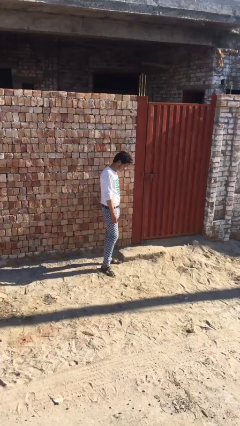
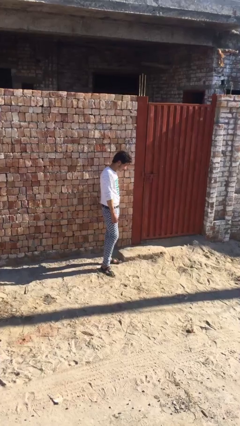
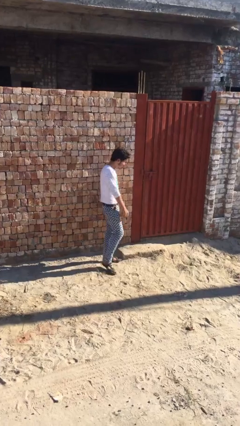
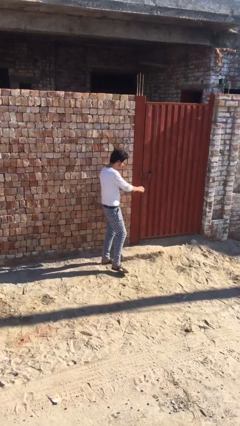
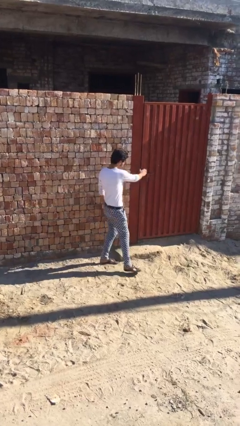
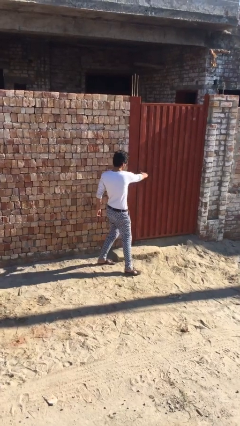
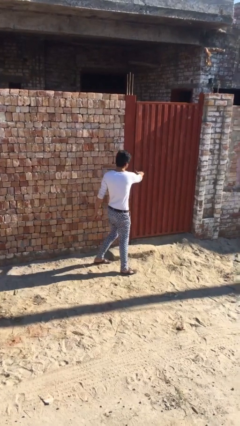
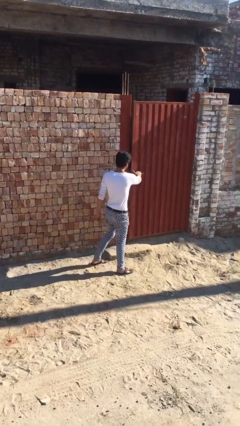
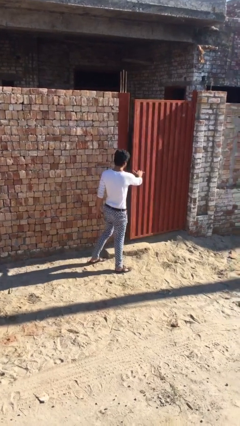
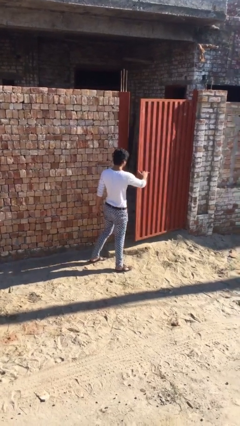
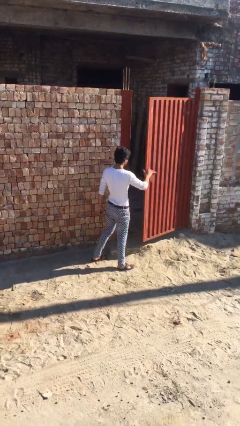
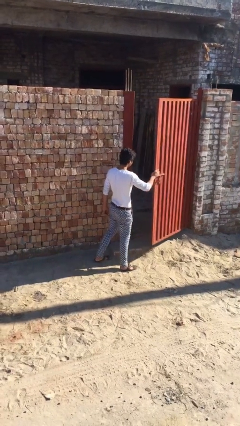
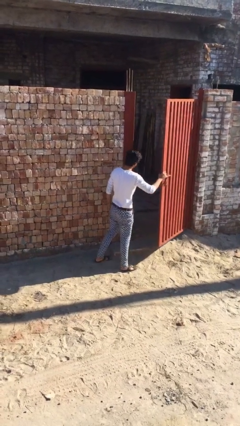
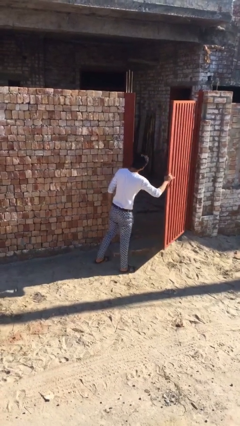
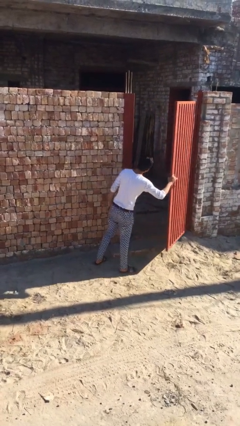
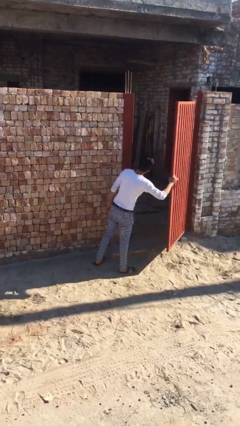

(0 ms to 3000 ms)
person opens facility door

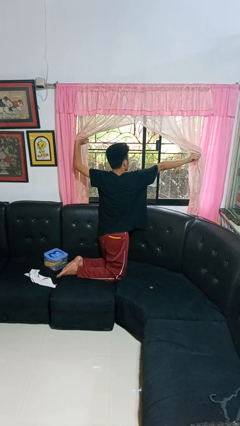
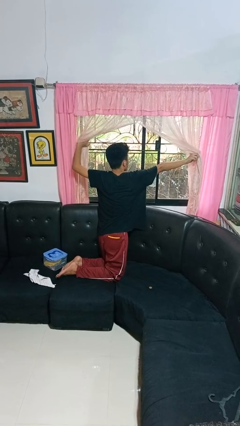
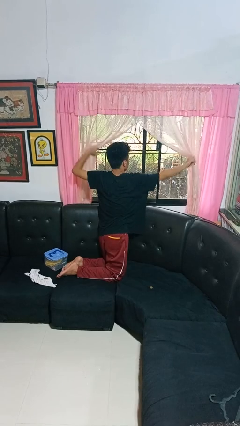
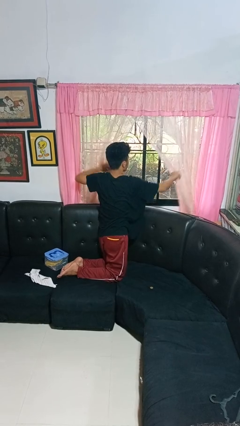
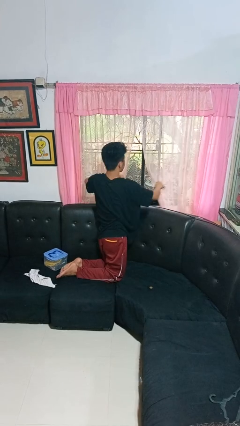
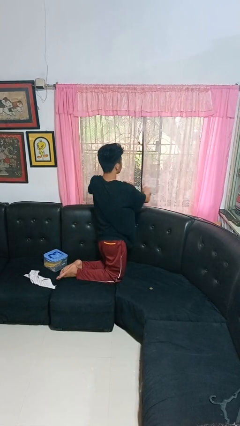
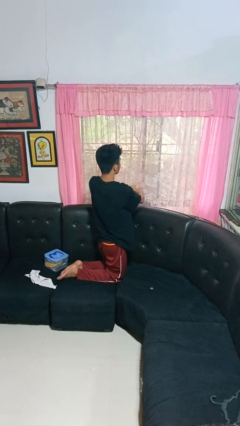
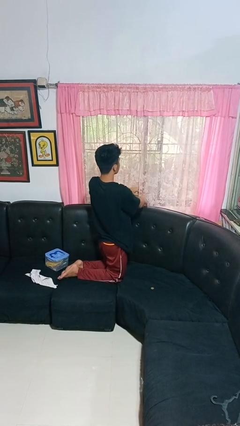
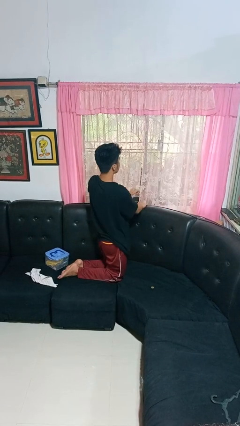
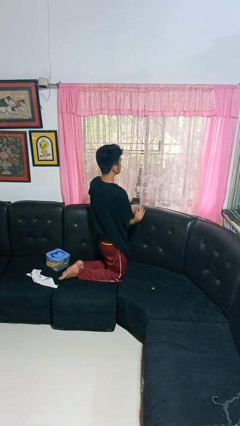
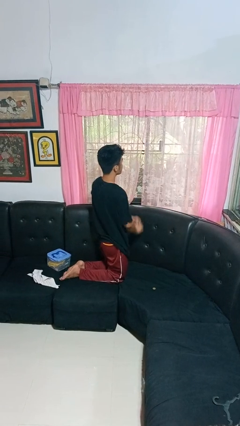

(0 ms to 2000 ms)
person closes curtains

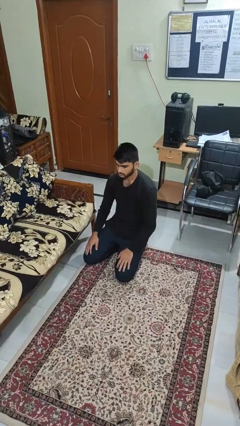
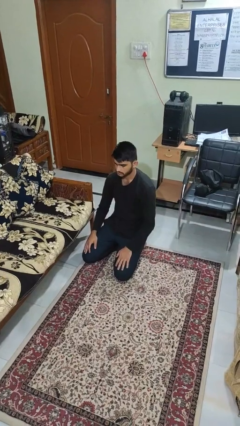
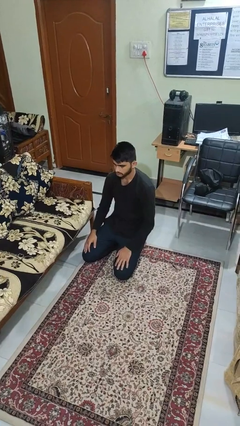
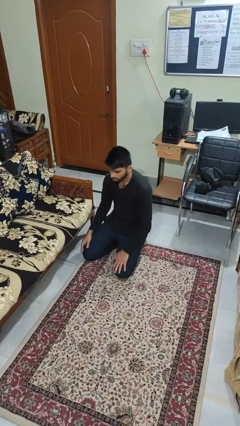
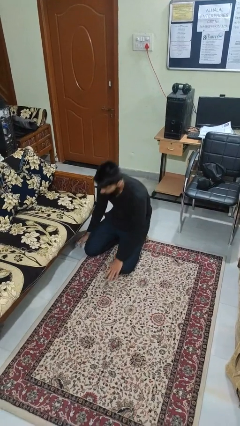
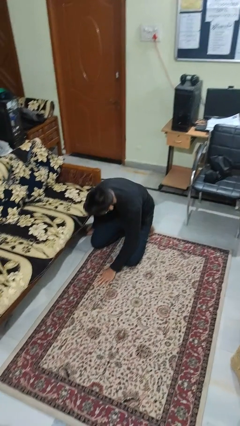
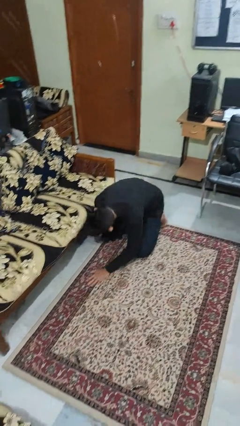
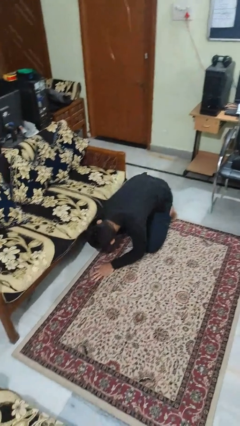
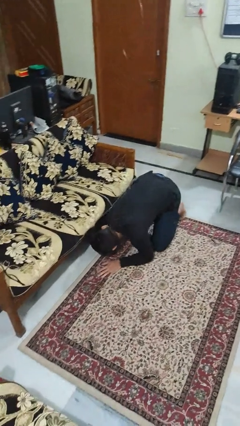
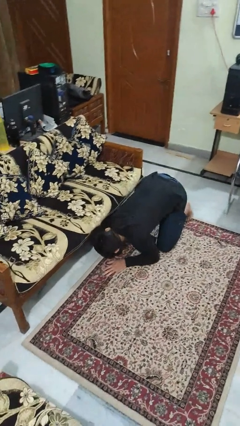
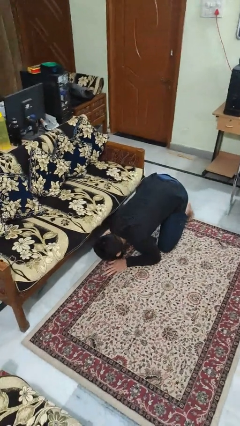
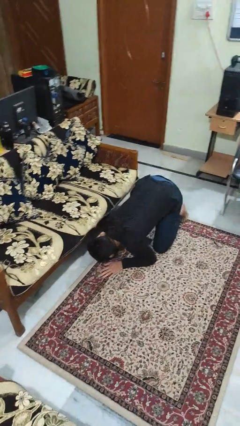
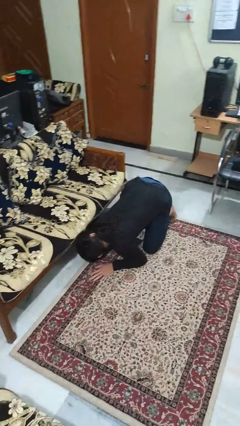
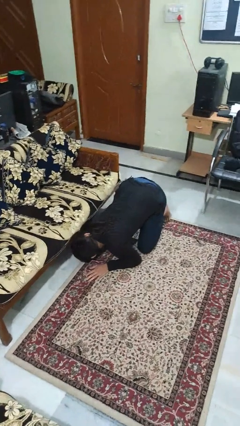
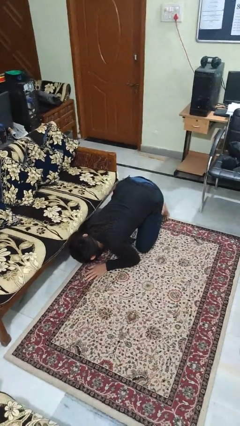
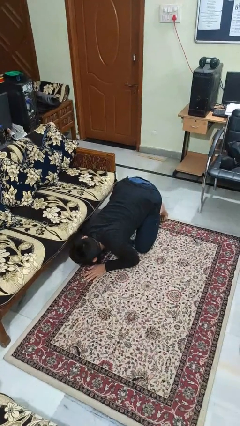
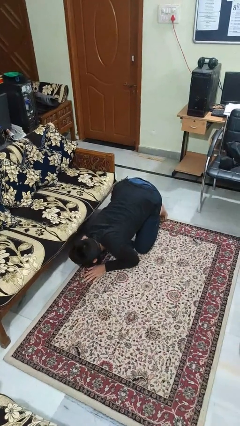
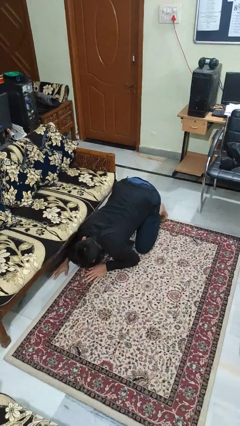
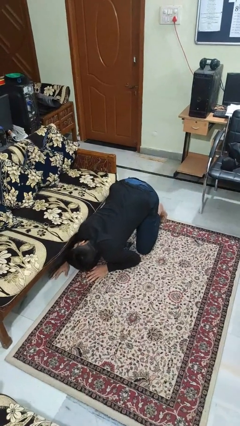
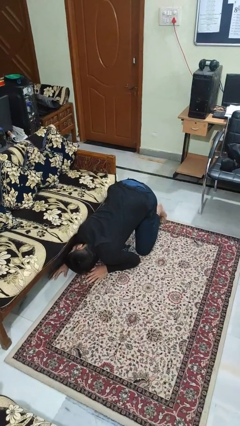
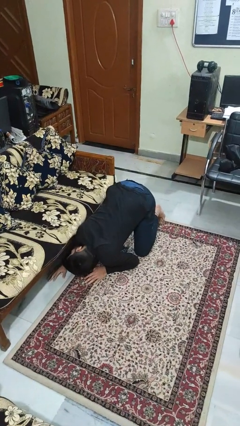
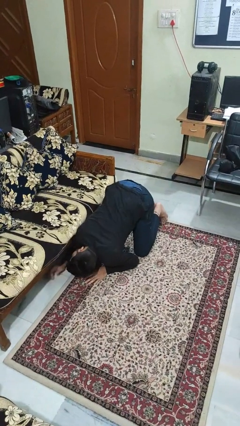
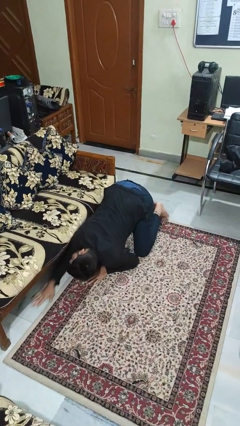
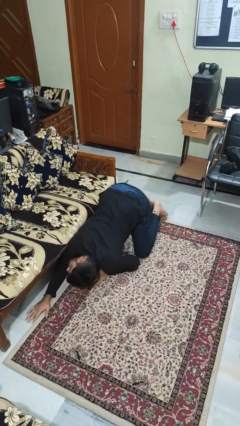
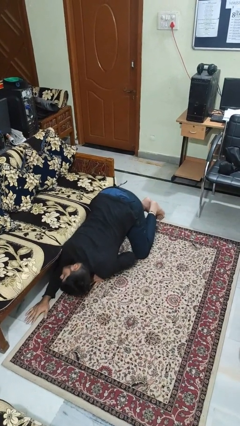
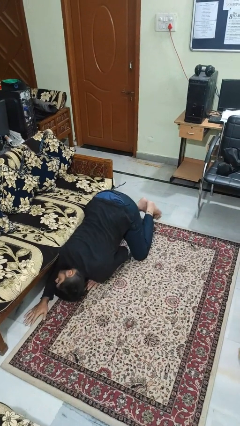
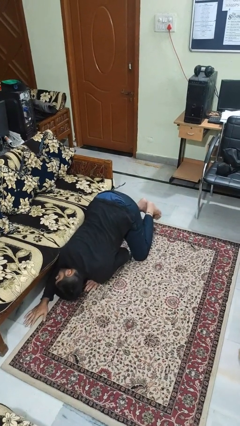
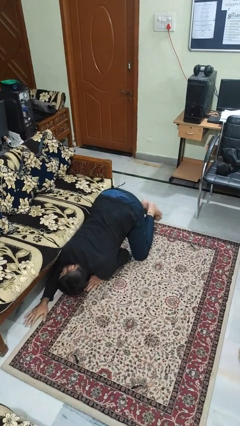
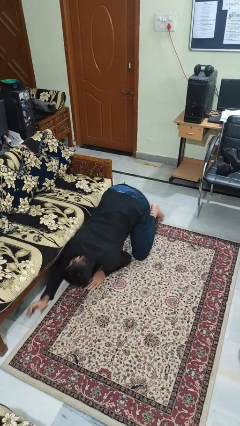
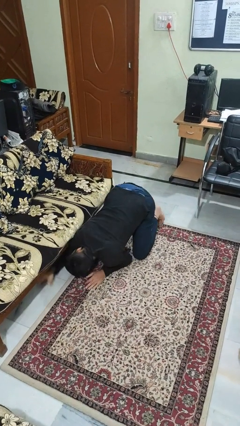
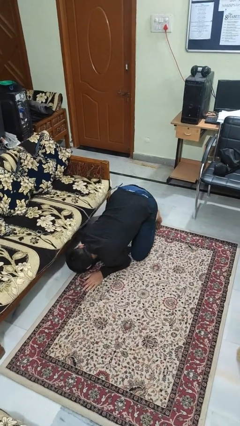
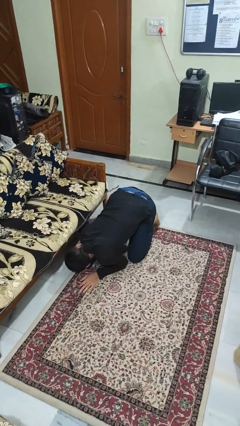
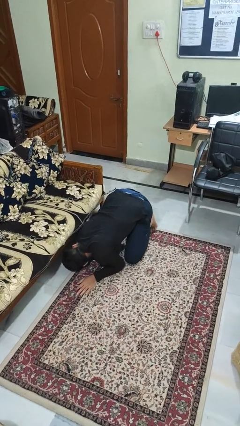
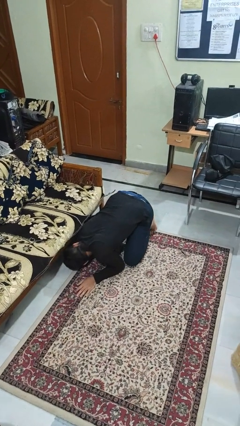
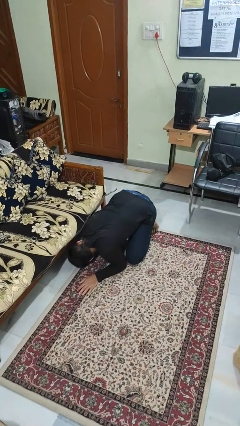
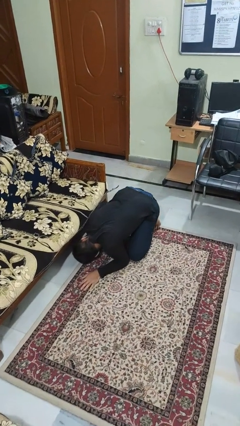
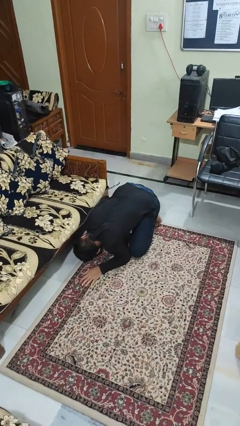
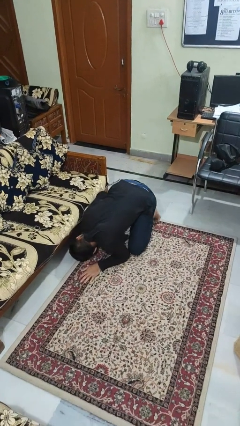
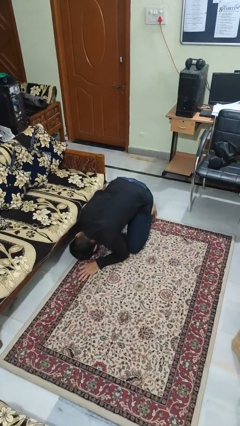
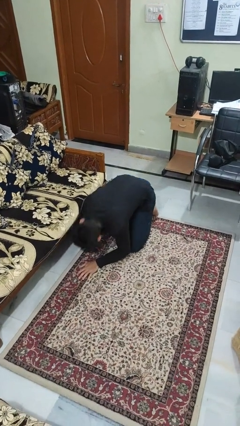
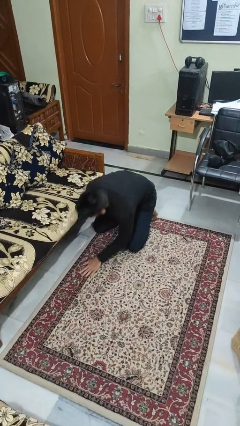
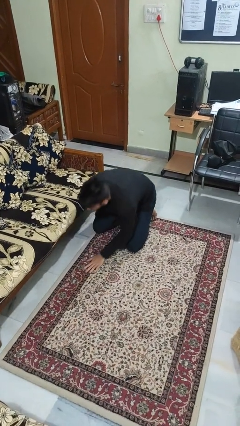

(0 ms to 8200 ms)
person searches under couch

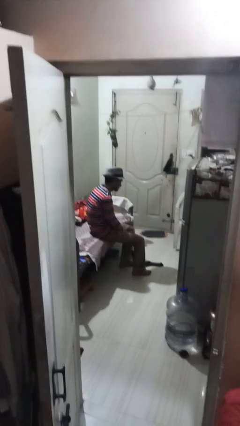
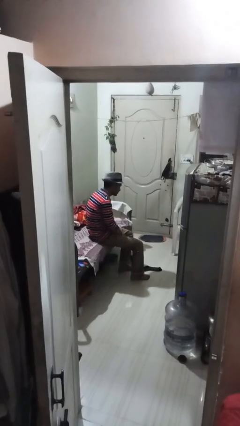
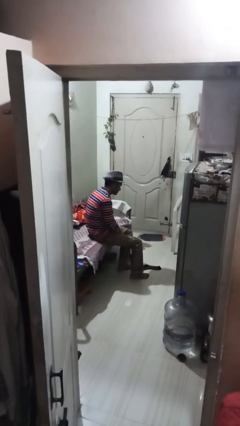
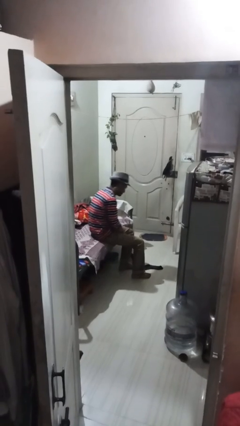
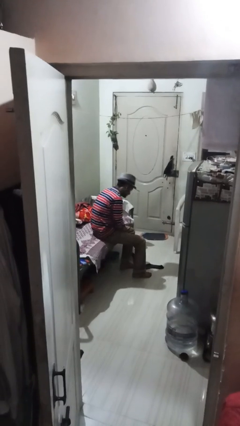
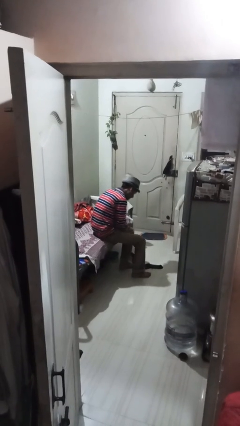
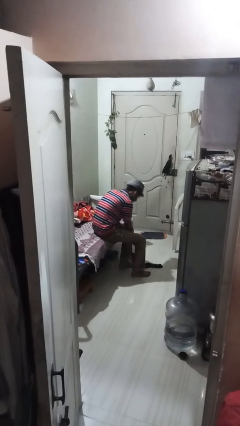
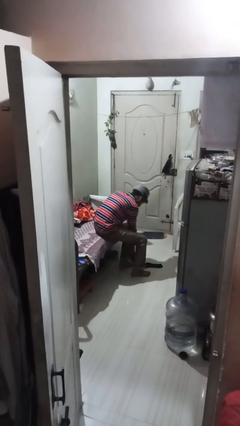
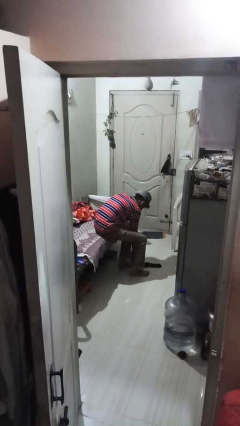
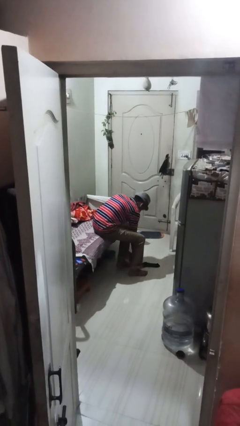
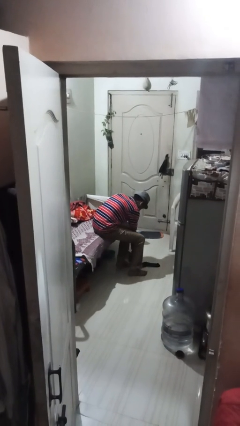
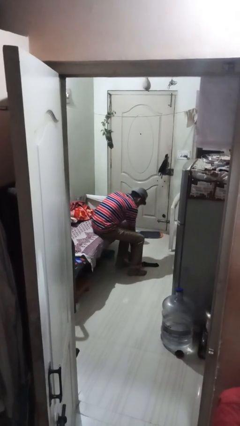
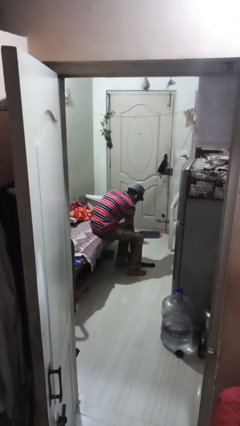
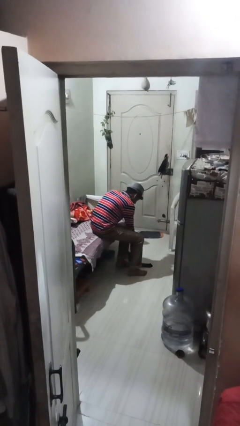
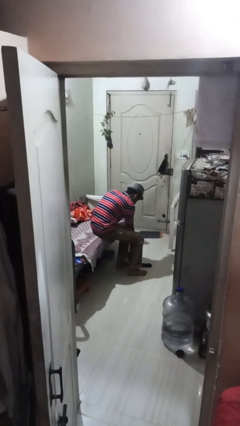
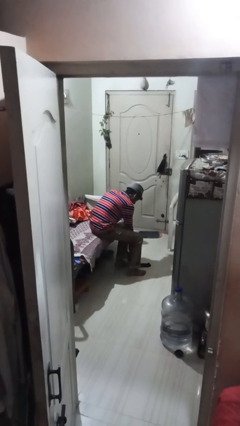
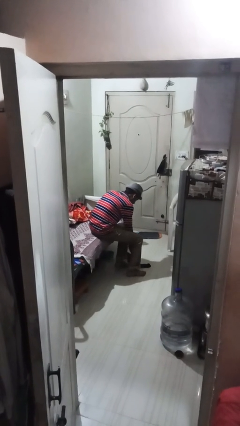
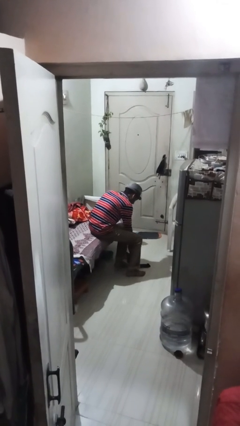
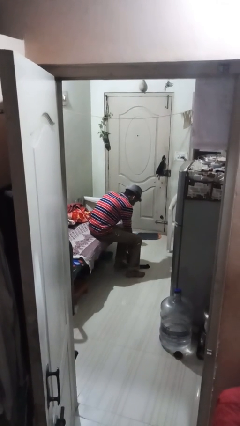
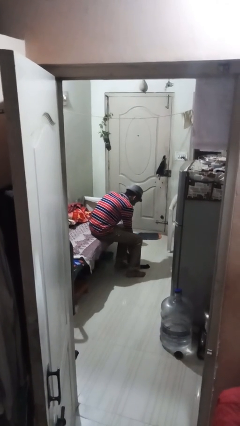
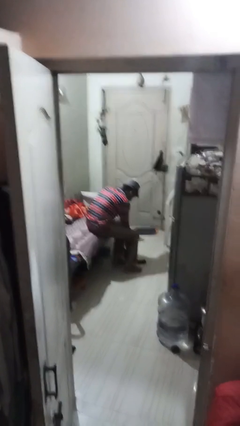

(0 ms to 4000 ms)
person takes off socks

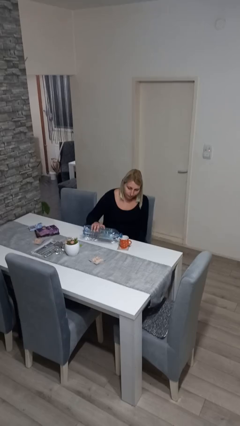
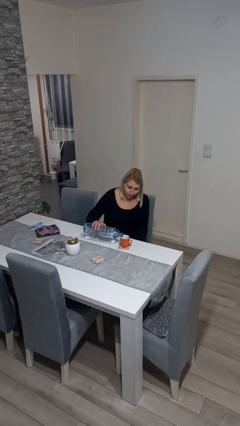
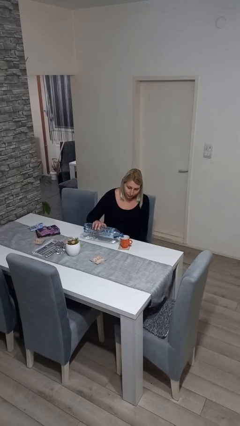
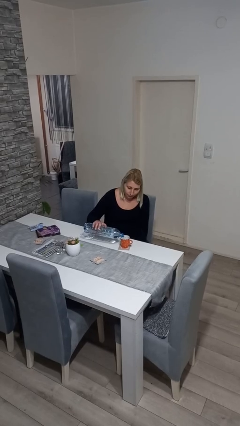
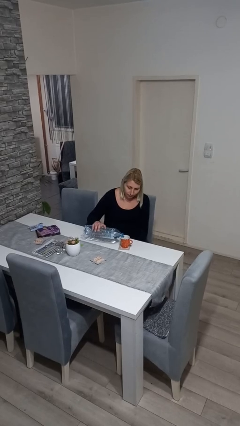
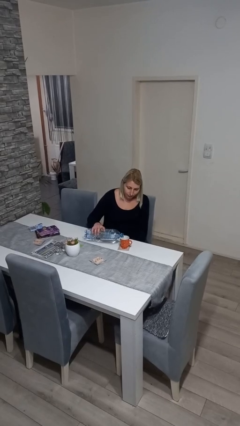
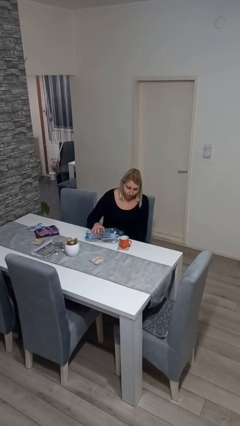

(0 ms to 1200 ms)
person pours liquid into cup
